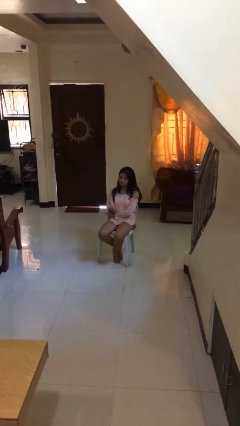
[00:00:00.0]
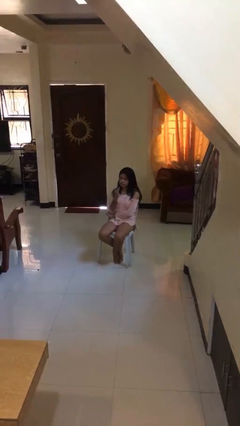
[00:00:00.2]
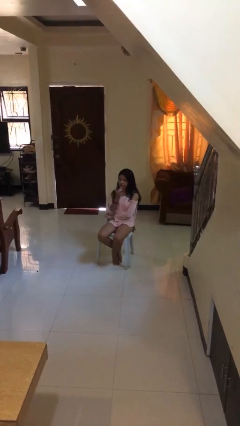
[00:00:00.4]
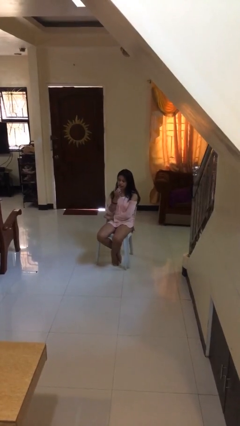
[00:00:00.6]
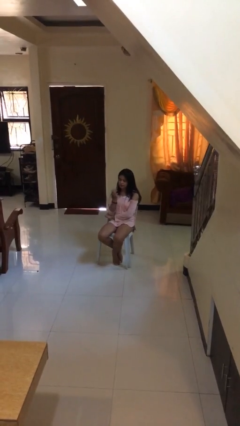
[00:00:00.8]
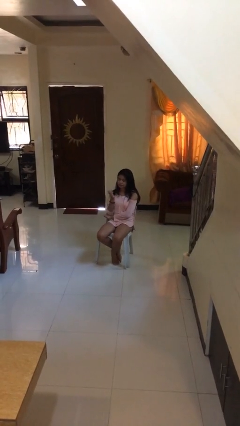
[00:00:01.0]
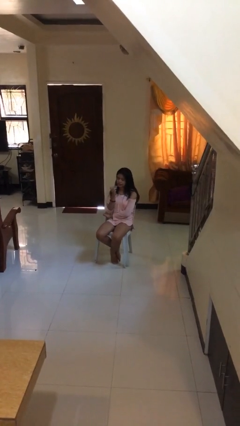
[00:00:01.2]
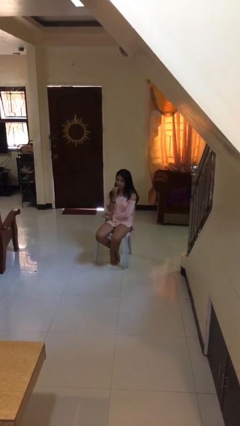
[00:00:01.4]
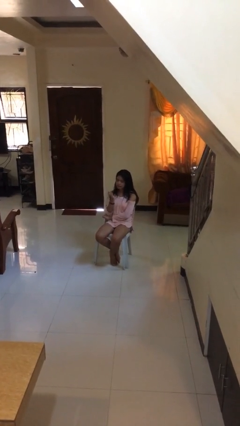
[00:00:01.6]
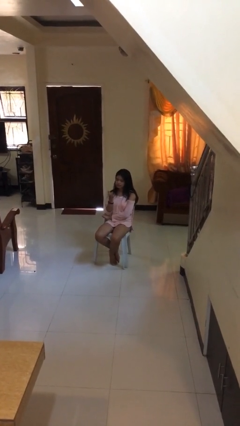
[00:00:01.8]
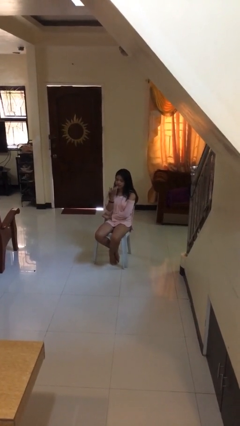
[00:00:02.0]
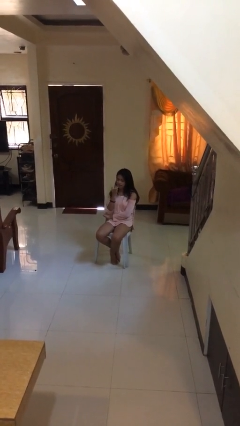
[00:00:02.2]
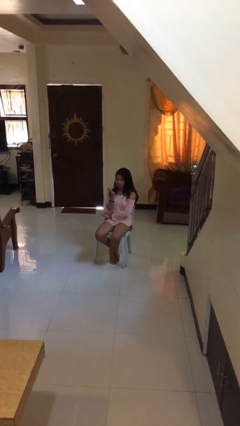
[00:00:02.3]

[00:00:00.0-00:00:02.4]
person licks fingers

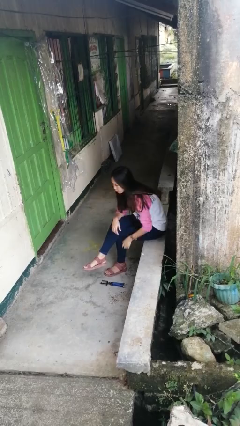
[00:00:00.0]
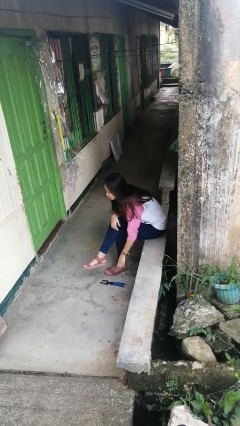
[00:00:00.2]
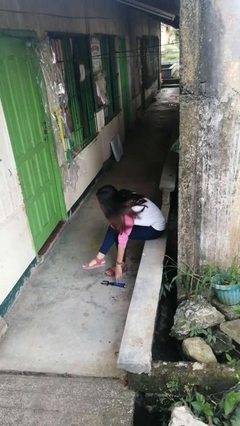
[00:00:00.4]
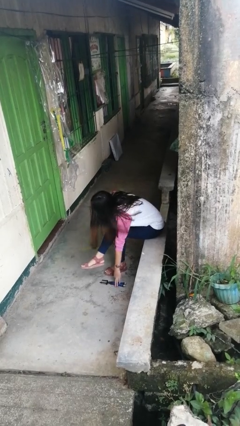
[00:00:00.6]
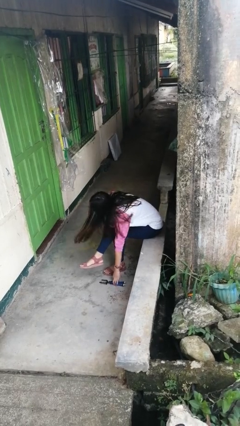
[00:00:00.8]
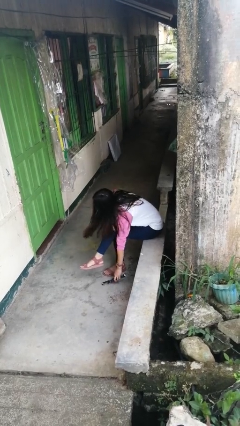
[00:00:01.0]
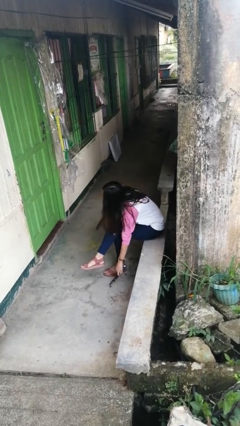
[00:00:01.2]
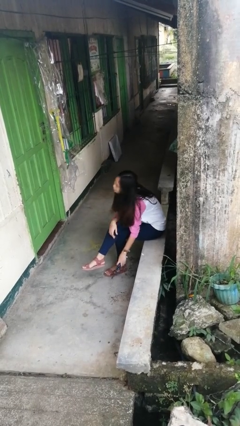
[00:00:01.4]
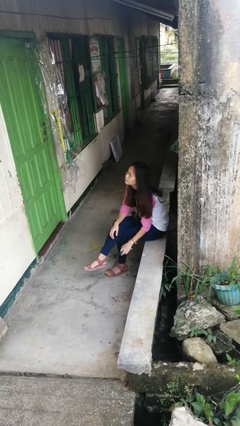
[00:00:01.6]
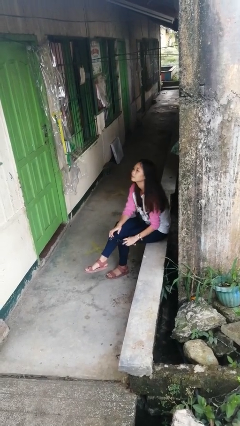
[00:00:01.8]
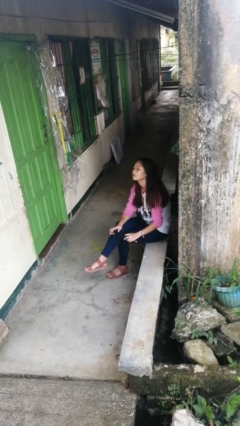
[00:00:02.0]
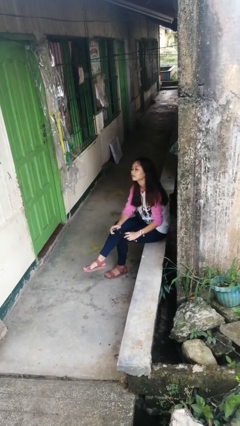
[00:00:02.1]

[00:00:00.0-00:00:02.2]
person picks up object from floor

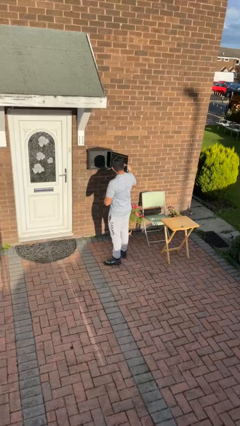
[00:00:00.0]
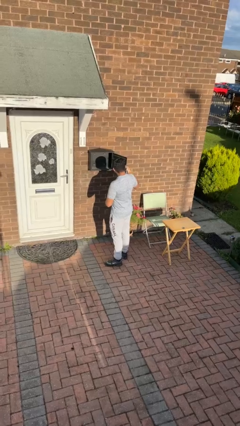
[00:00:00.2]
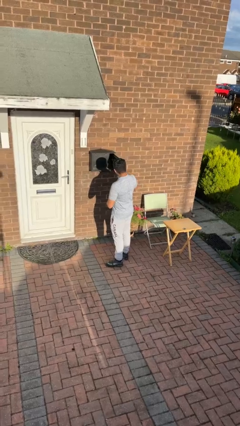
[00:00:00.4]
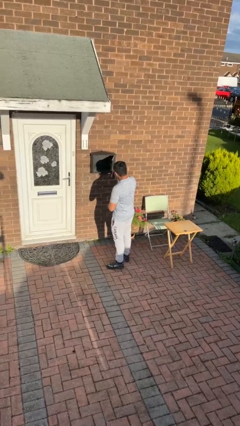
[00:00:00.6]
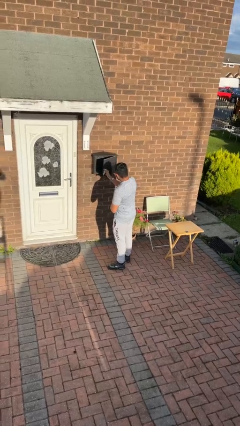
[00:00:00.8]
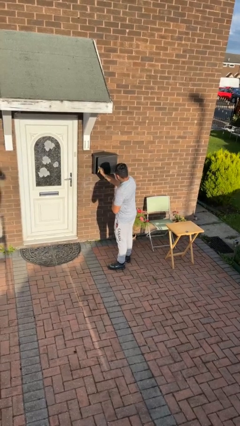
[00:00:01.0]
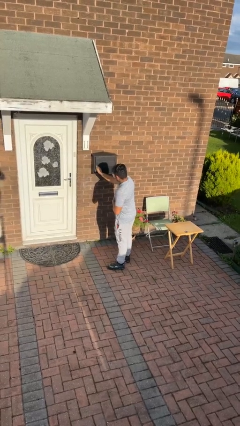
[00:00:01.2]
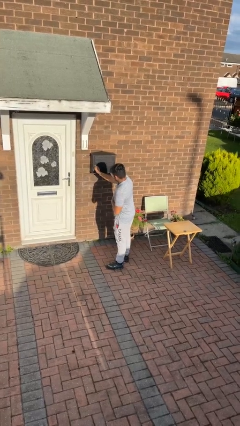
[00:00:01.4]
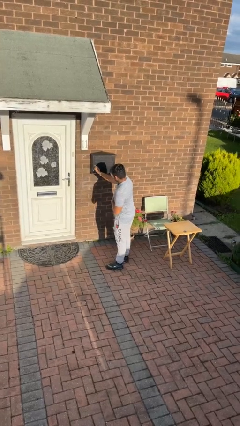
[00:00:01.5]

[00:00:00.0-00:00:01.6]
person closes mailbox

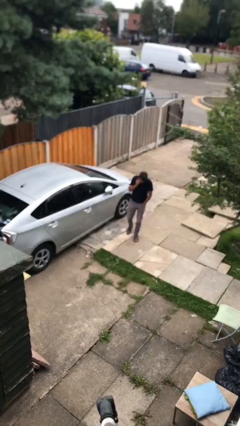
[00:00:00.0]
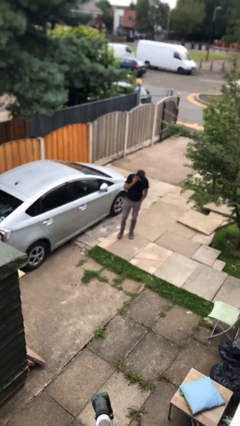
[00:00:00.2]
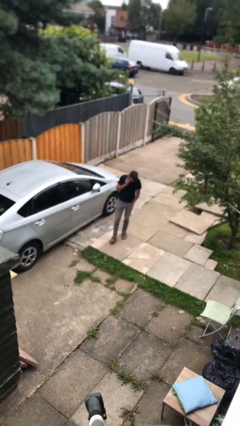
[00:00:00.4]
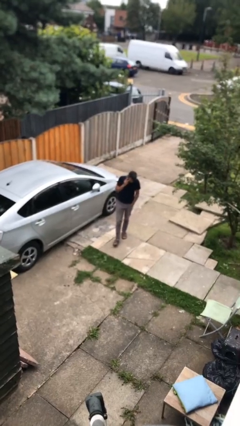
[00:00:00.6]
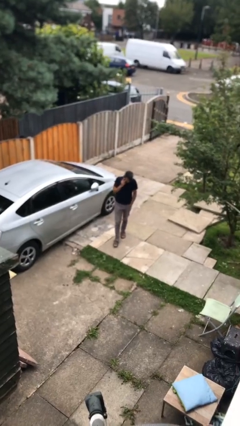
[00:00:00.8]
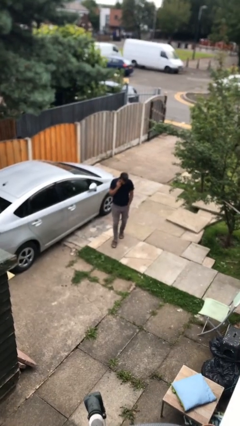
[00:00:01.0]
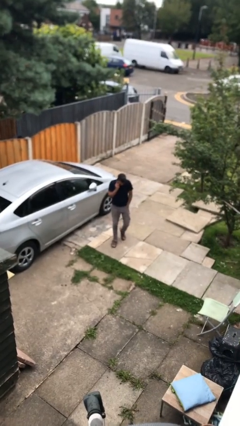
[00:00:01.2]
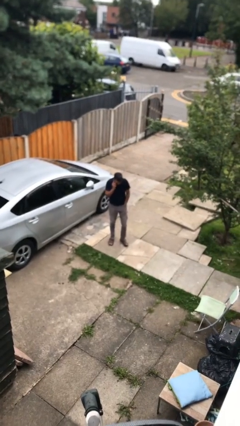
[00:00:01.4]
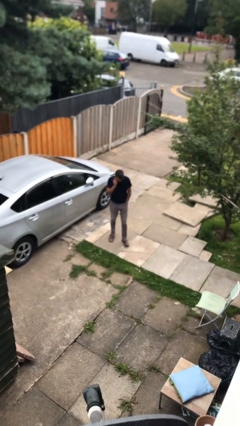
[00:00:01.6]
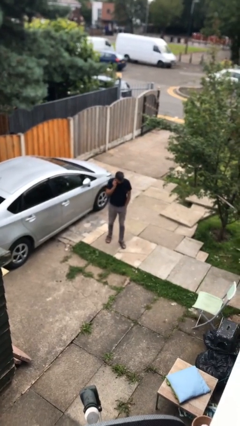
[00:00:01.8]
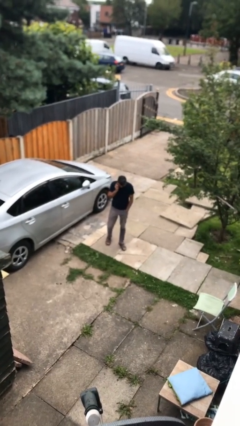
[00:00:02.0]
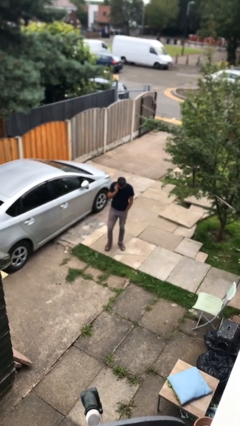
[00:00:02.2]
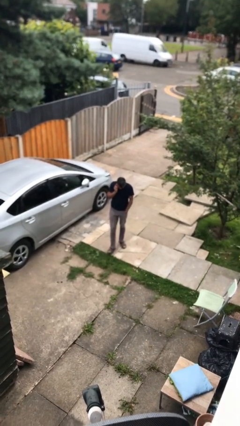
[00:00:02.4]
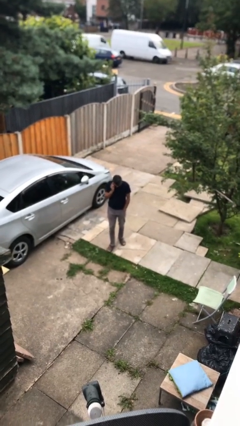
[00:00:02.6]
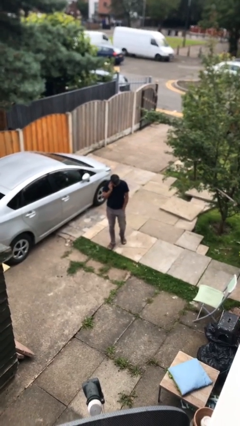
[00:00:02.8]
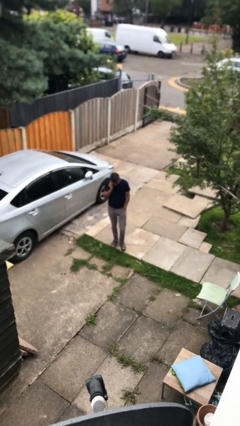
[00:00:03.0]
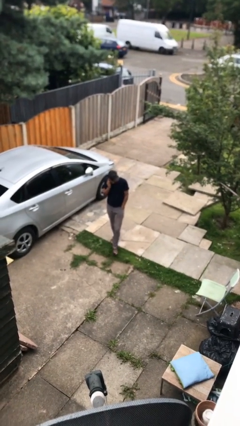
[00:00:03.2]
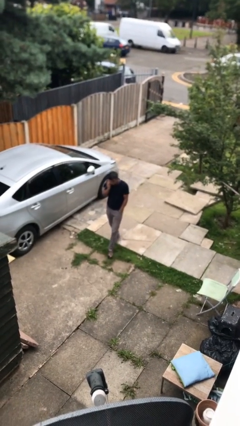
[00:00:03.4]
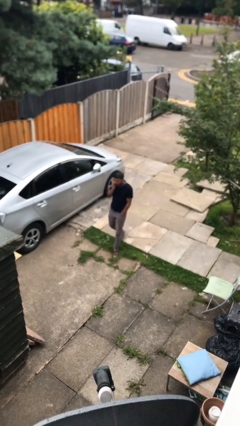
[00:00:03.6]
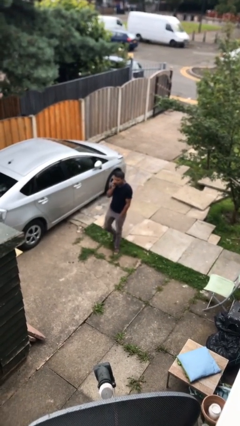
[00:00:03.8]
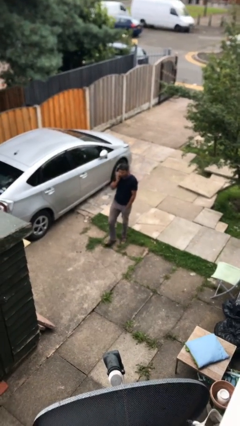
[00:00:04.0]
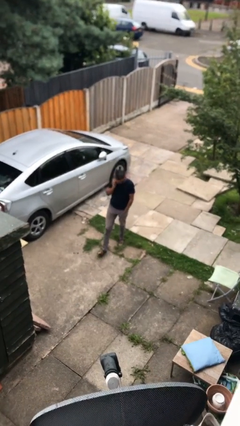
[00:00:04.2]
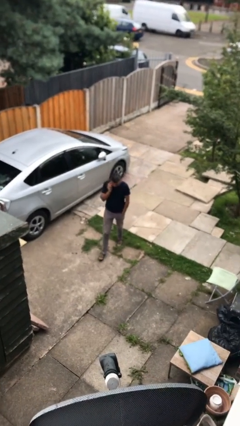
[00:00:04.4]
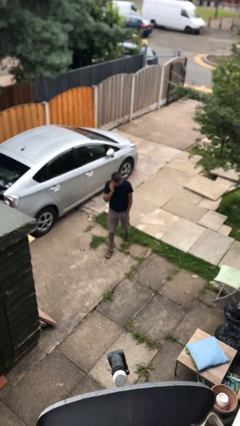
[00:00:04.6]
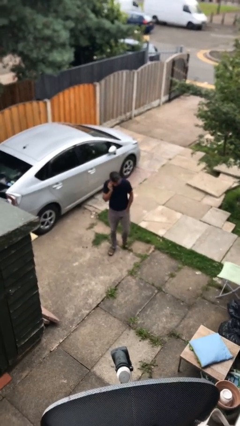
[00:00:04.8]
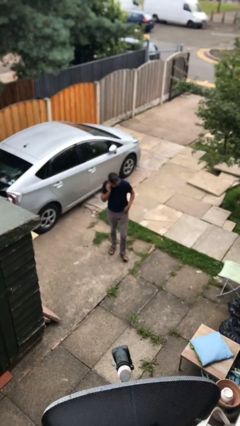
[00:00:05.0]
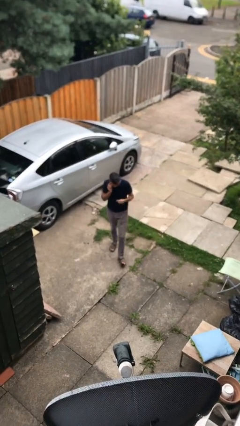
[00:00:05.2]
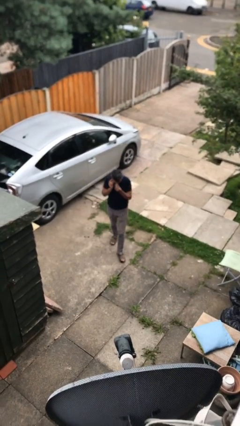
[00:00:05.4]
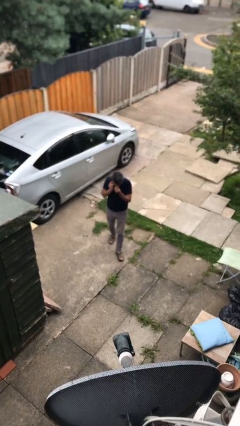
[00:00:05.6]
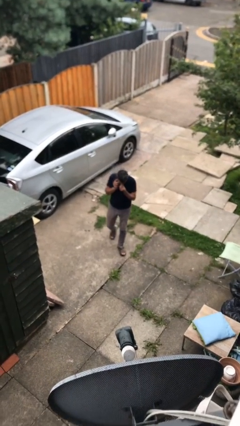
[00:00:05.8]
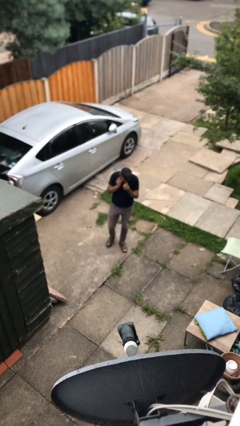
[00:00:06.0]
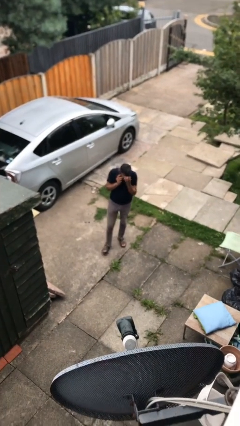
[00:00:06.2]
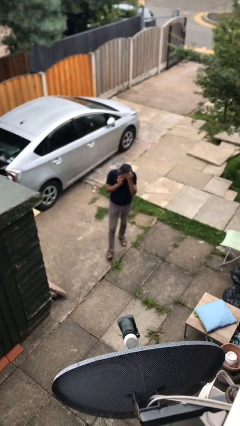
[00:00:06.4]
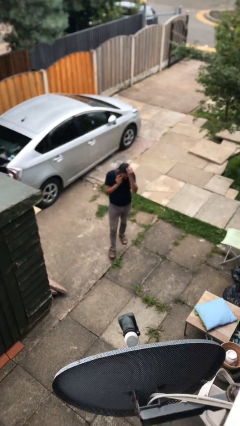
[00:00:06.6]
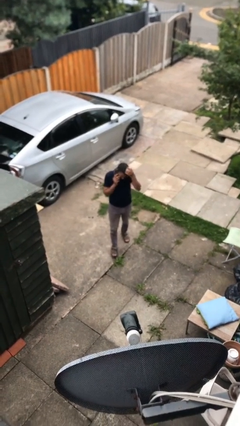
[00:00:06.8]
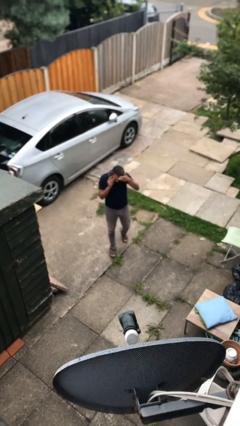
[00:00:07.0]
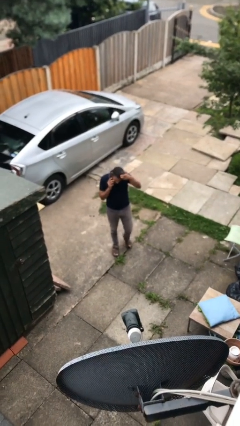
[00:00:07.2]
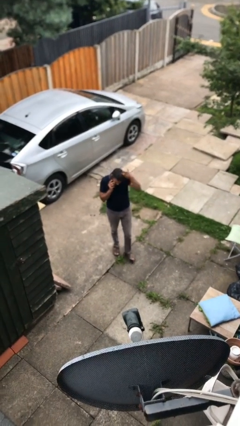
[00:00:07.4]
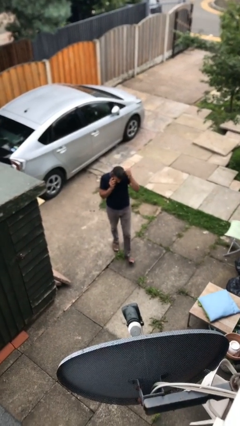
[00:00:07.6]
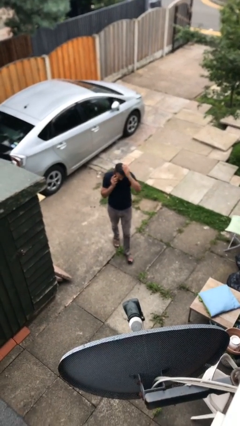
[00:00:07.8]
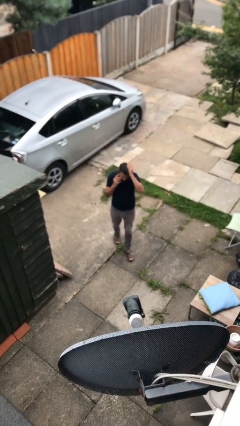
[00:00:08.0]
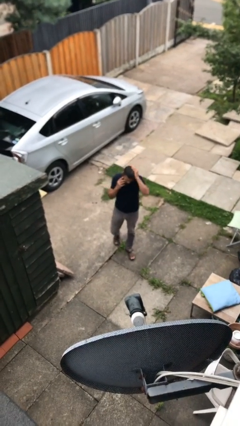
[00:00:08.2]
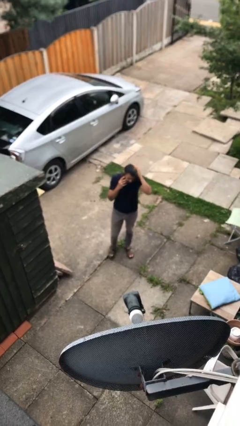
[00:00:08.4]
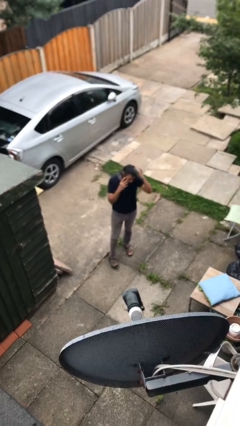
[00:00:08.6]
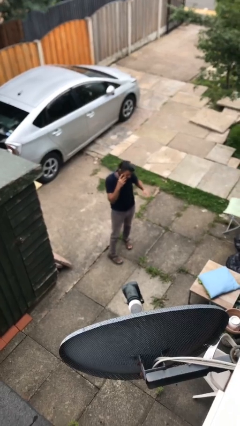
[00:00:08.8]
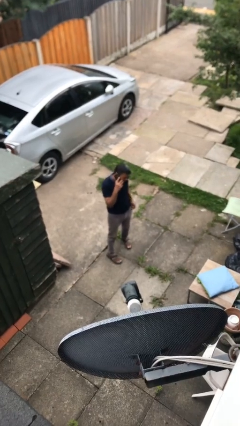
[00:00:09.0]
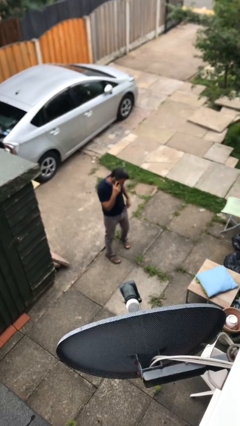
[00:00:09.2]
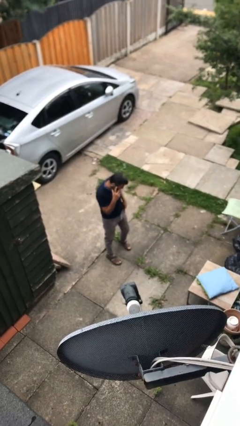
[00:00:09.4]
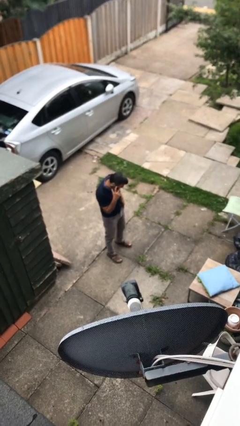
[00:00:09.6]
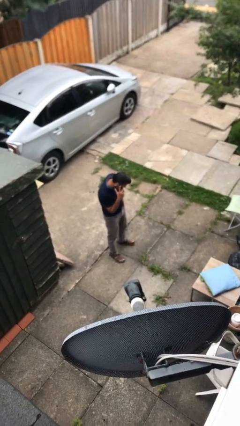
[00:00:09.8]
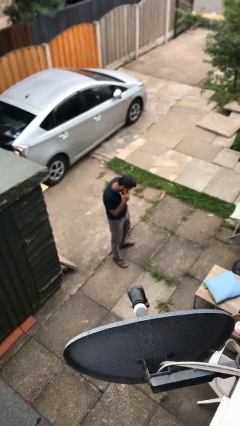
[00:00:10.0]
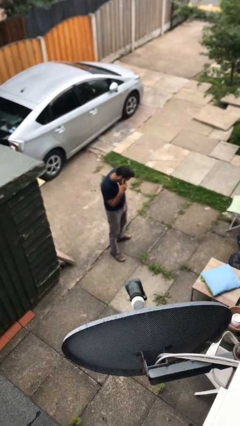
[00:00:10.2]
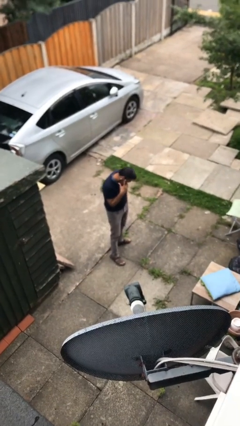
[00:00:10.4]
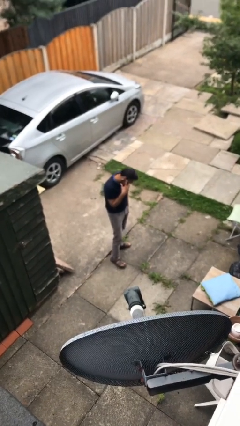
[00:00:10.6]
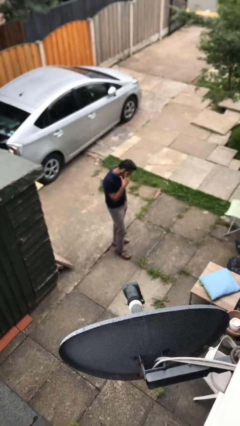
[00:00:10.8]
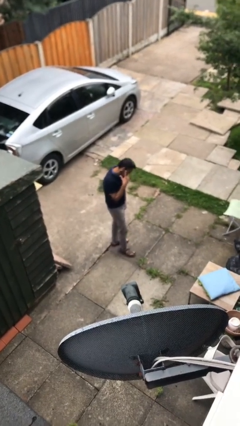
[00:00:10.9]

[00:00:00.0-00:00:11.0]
person talks on phone

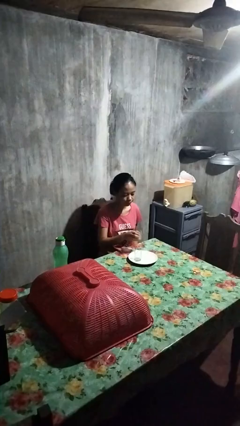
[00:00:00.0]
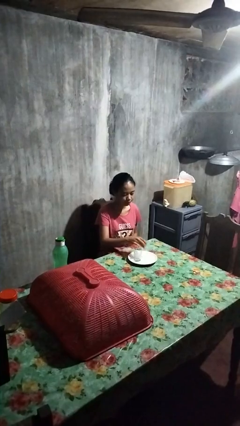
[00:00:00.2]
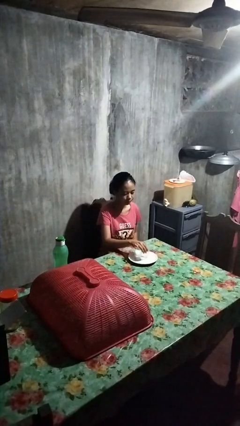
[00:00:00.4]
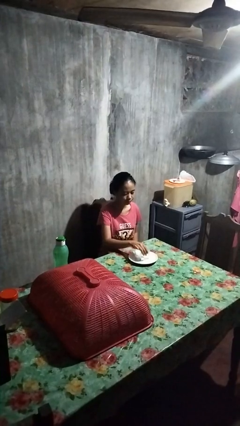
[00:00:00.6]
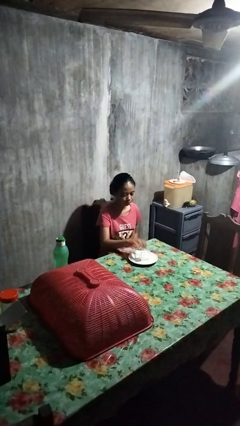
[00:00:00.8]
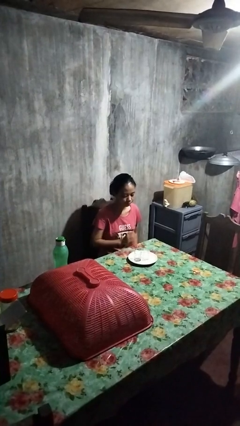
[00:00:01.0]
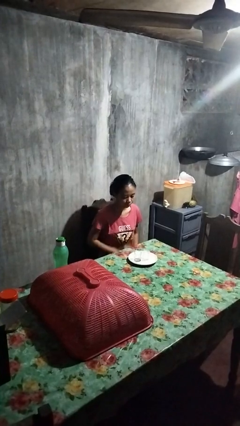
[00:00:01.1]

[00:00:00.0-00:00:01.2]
person puts down object on table
